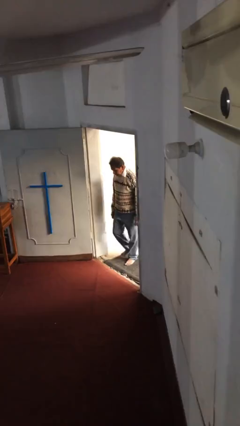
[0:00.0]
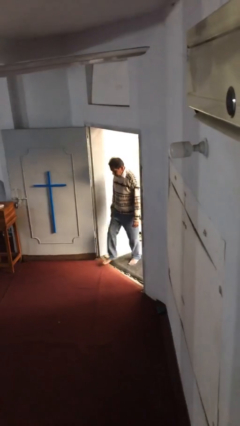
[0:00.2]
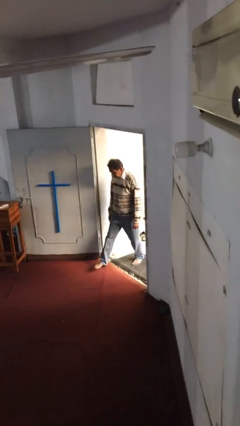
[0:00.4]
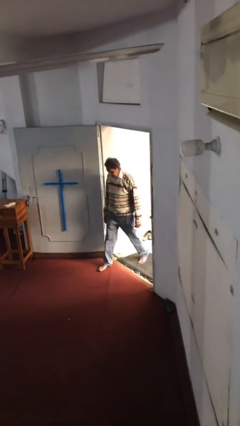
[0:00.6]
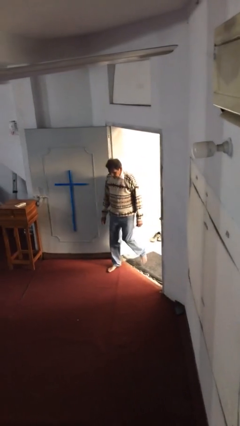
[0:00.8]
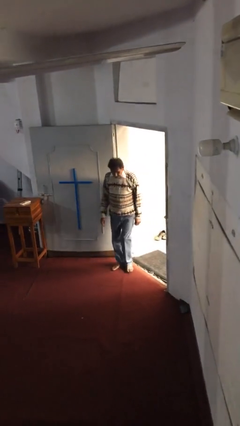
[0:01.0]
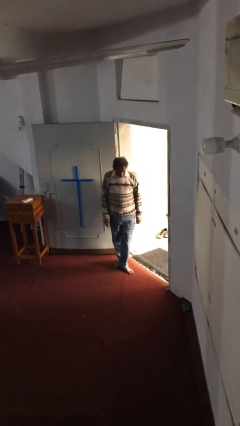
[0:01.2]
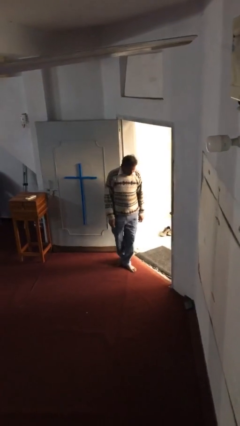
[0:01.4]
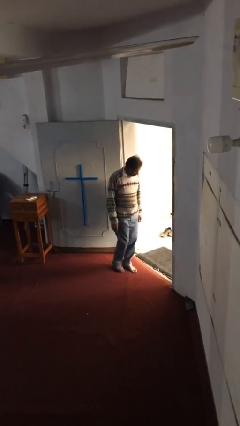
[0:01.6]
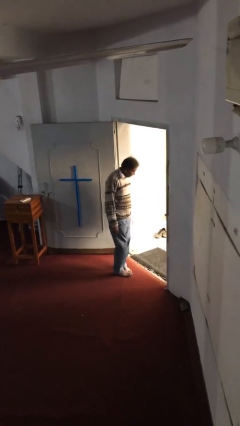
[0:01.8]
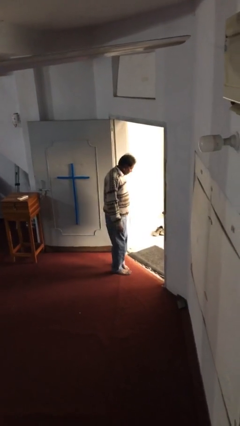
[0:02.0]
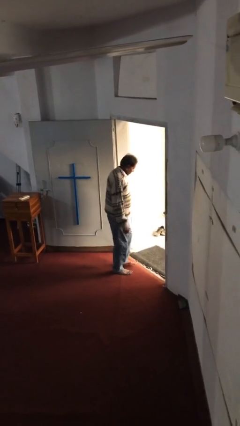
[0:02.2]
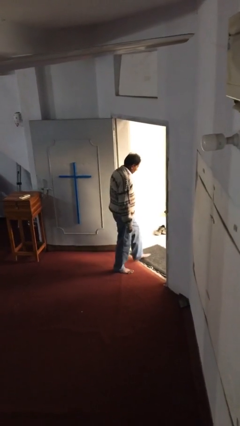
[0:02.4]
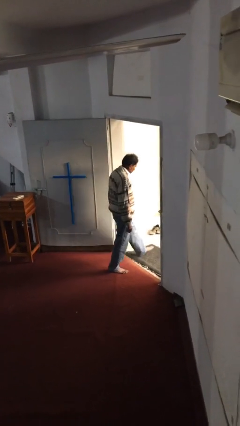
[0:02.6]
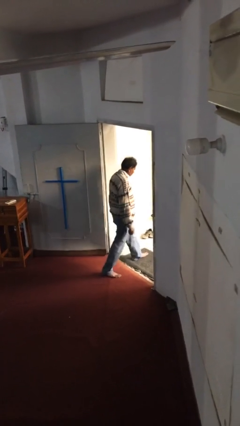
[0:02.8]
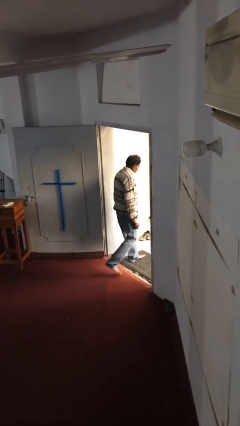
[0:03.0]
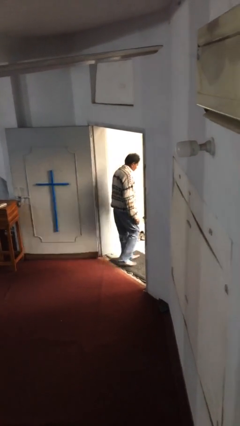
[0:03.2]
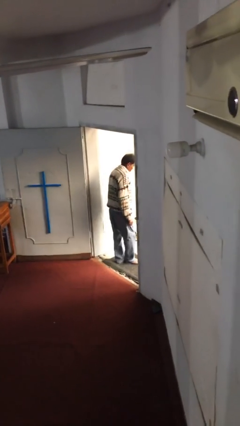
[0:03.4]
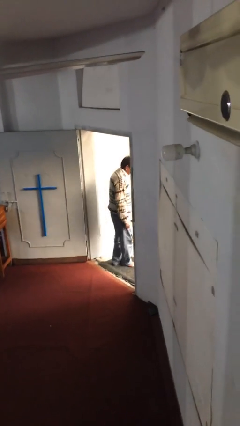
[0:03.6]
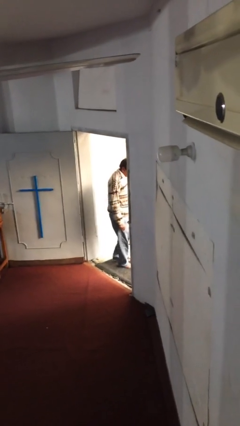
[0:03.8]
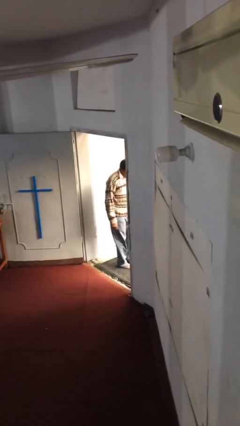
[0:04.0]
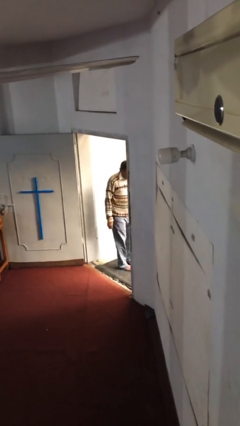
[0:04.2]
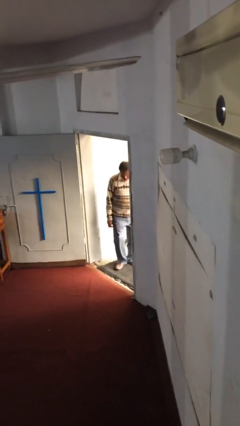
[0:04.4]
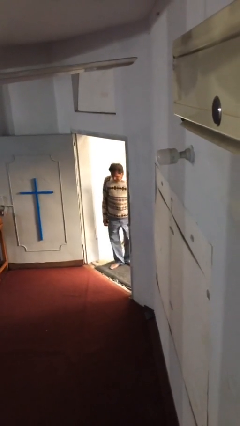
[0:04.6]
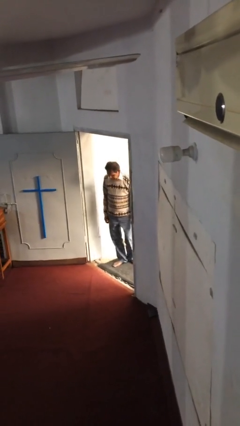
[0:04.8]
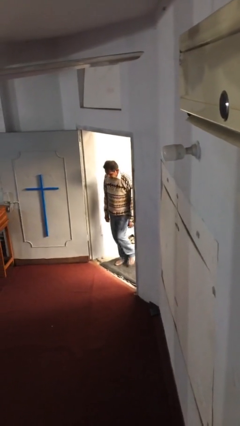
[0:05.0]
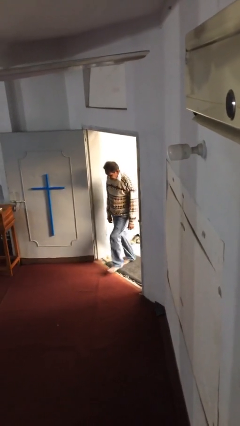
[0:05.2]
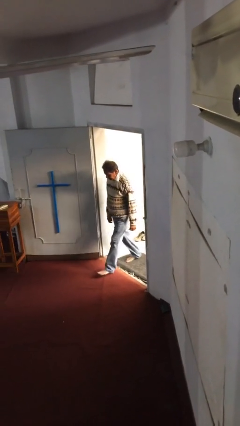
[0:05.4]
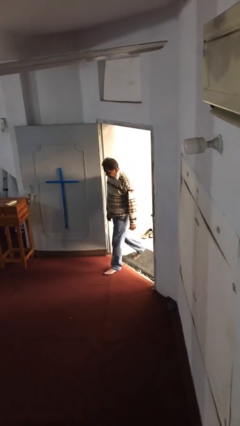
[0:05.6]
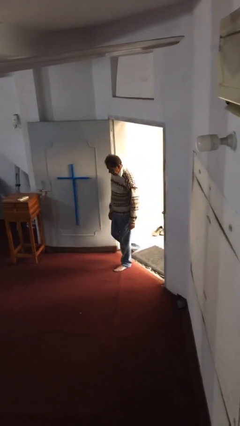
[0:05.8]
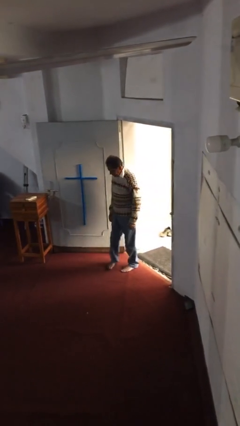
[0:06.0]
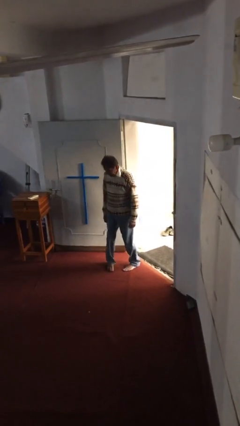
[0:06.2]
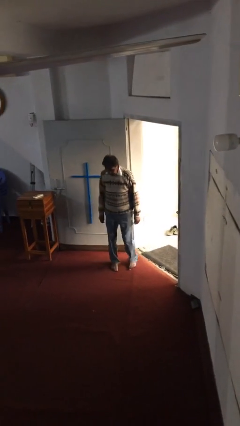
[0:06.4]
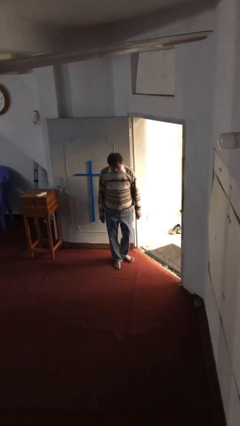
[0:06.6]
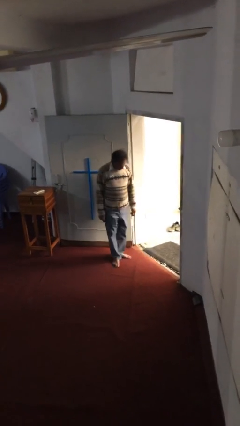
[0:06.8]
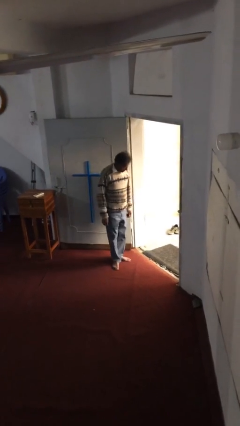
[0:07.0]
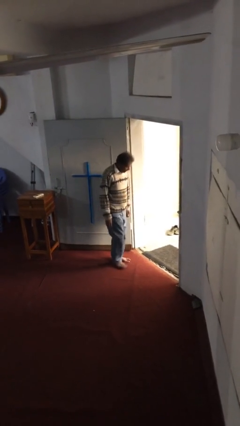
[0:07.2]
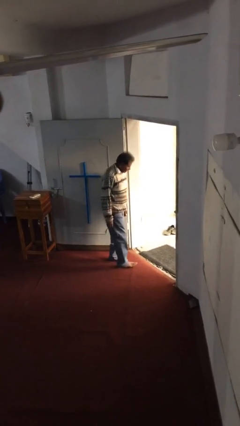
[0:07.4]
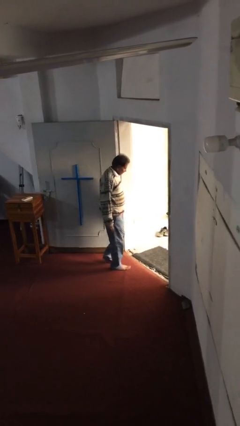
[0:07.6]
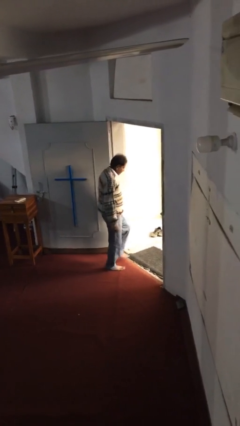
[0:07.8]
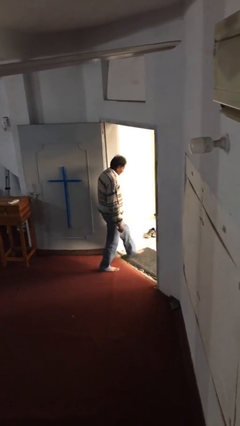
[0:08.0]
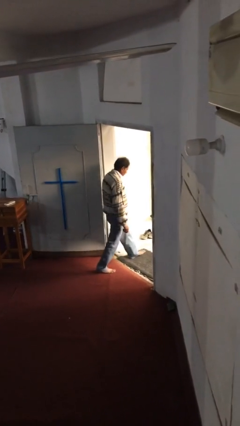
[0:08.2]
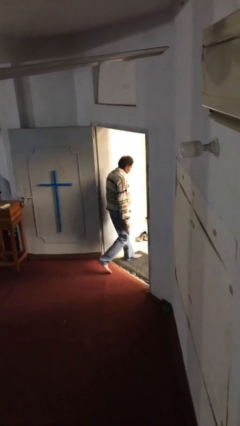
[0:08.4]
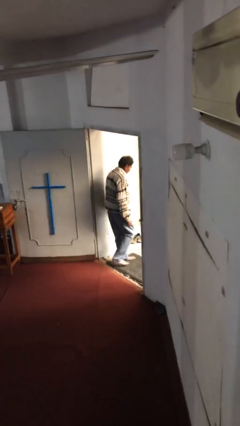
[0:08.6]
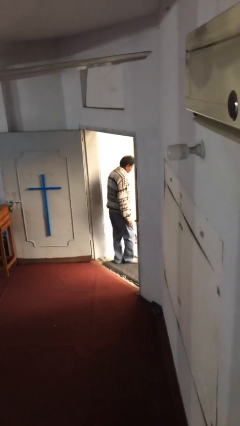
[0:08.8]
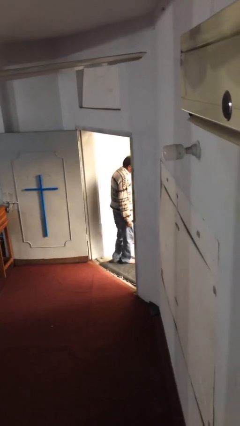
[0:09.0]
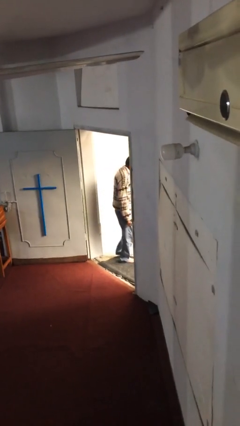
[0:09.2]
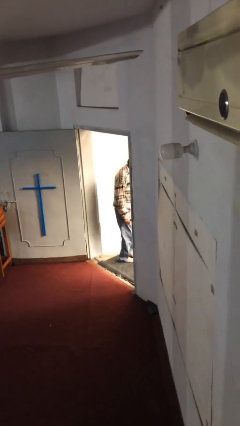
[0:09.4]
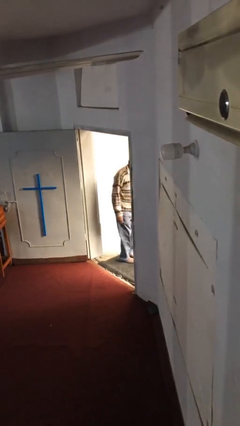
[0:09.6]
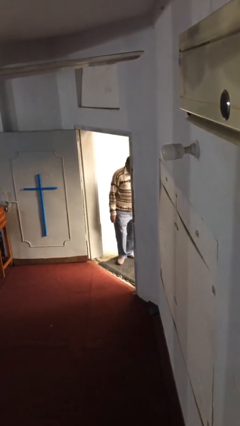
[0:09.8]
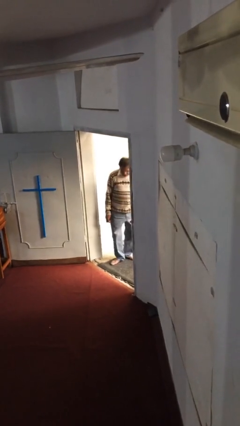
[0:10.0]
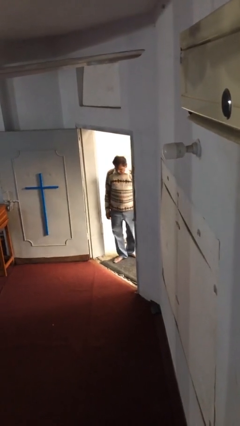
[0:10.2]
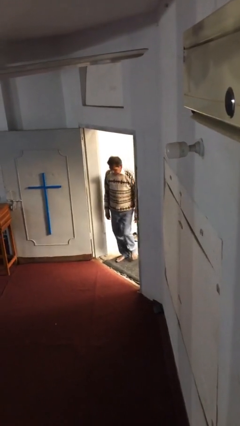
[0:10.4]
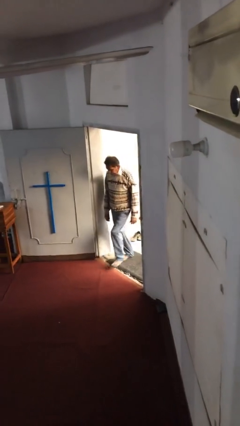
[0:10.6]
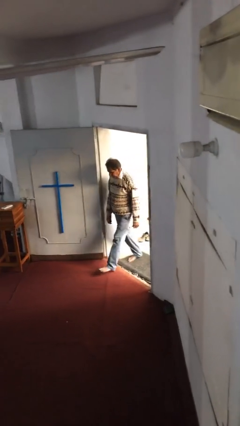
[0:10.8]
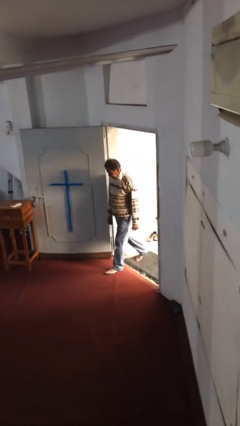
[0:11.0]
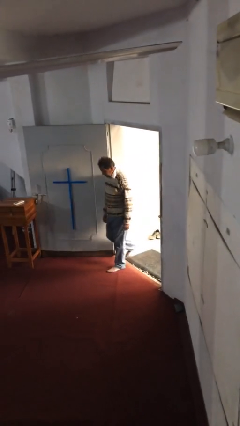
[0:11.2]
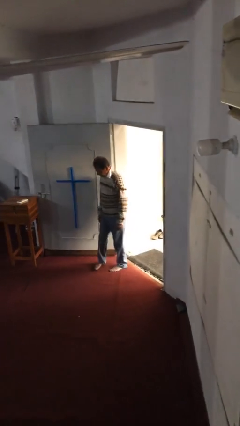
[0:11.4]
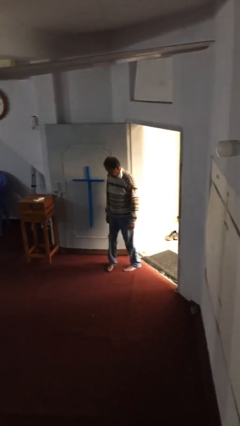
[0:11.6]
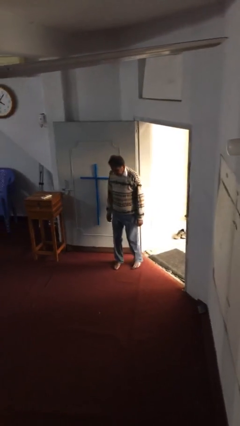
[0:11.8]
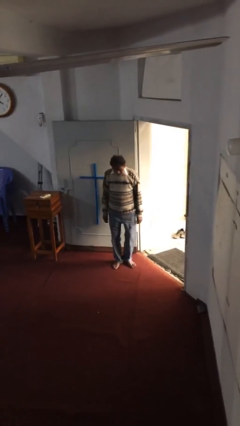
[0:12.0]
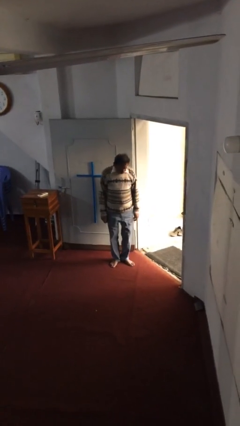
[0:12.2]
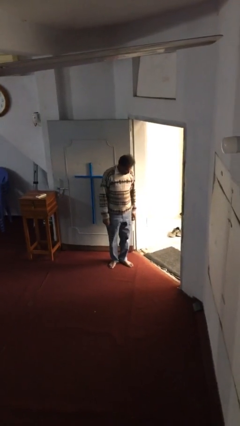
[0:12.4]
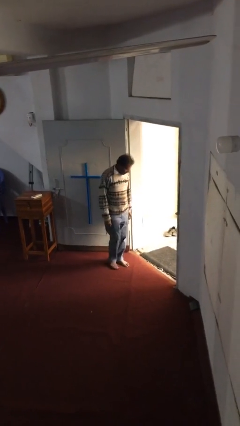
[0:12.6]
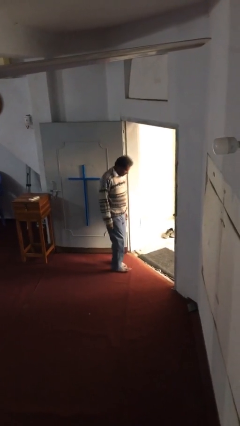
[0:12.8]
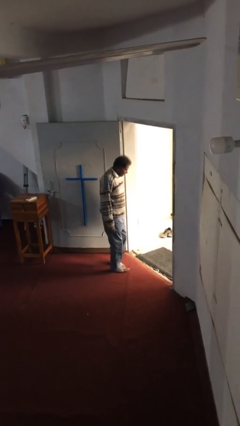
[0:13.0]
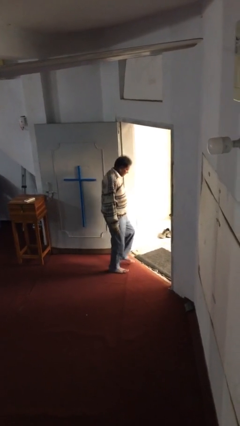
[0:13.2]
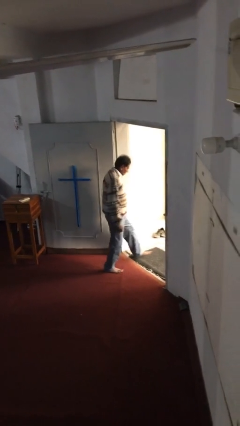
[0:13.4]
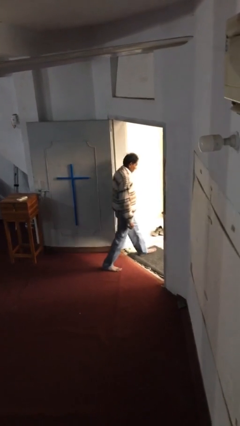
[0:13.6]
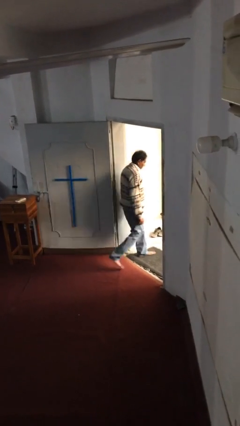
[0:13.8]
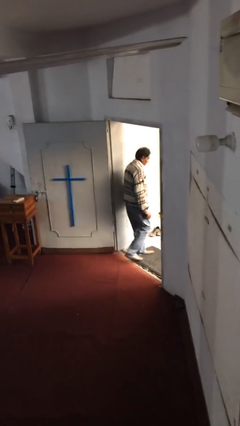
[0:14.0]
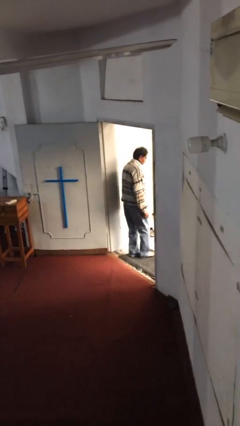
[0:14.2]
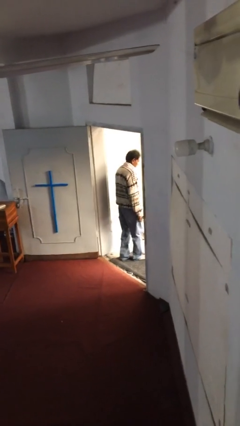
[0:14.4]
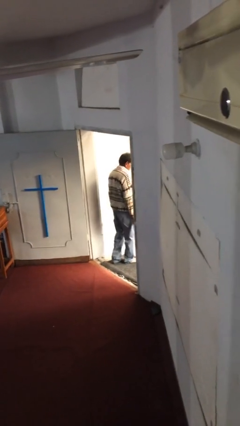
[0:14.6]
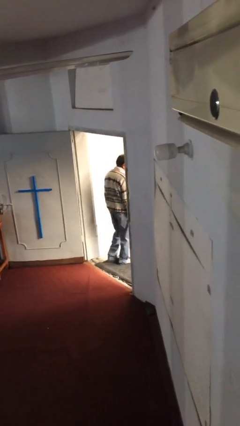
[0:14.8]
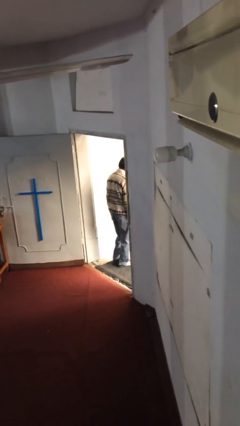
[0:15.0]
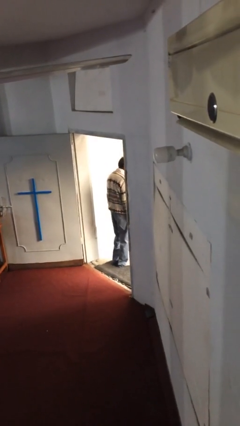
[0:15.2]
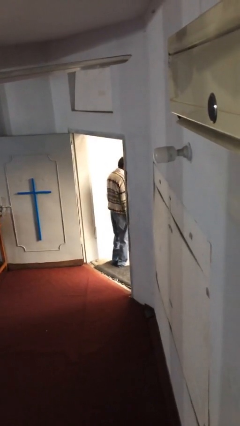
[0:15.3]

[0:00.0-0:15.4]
person texts on phone

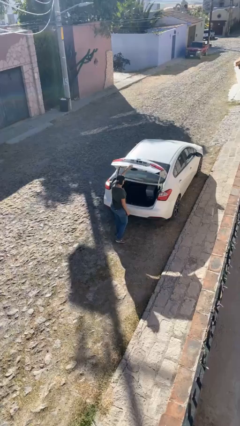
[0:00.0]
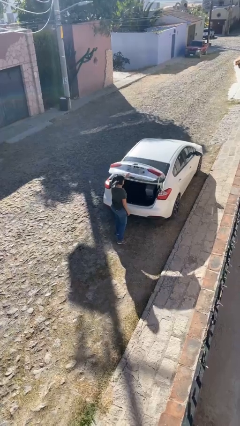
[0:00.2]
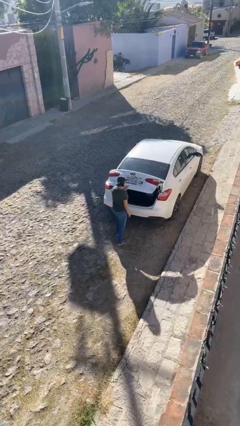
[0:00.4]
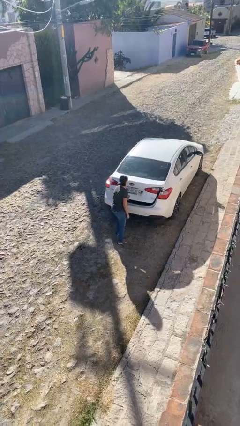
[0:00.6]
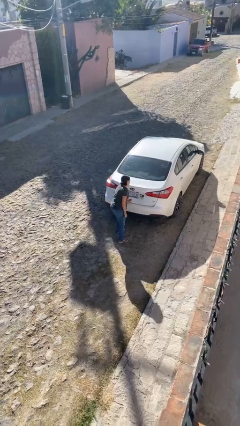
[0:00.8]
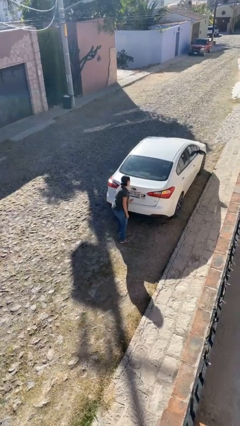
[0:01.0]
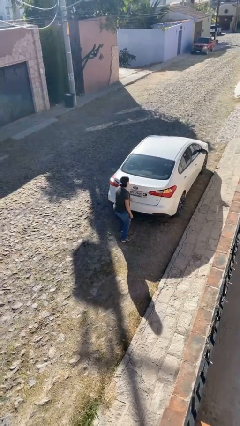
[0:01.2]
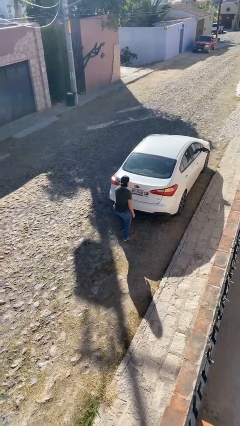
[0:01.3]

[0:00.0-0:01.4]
person closes car trunk

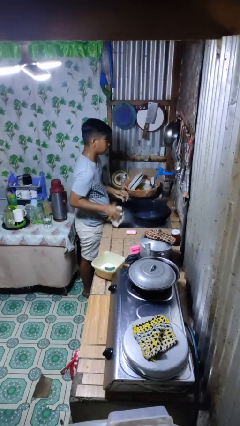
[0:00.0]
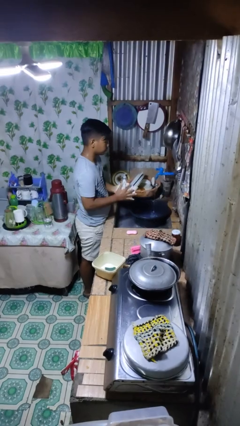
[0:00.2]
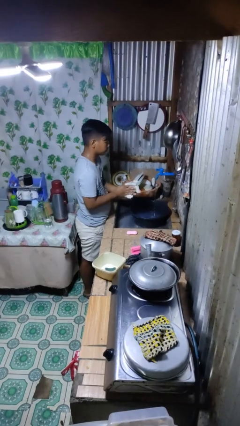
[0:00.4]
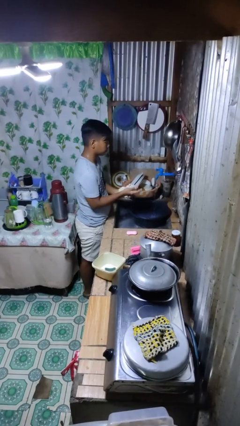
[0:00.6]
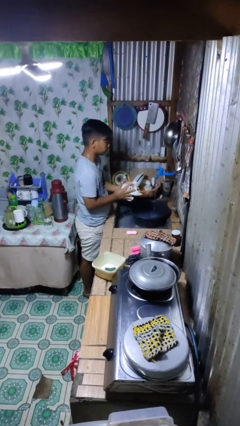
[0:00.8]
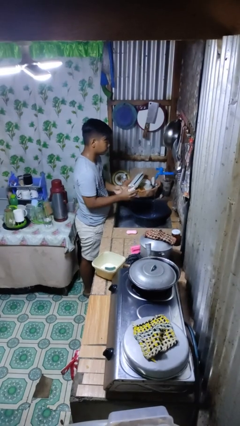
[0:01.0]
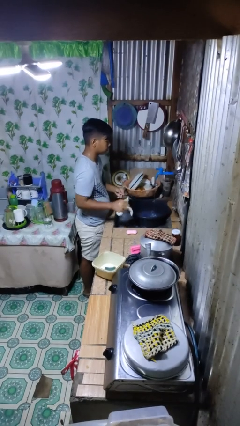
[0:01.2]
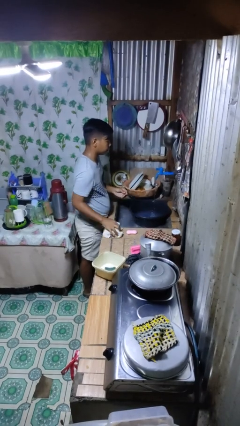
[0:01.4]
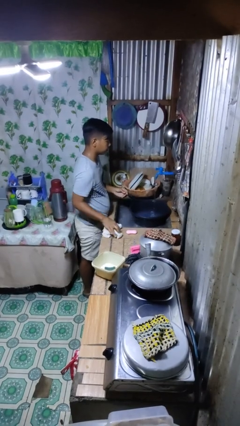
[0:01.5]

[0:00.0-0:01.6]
person dries hands with towel
